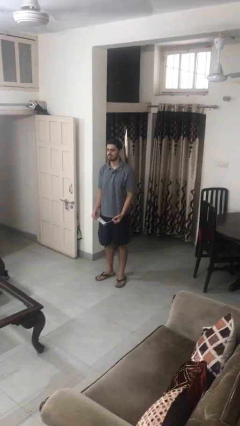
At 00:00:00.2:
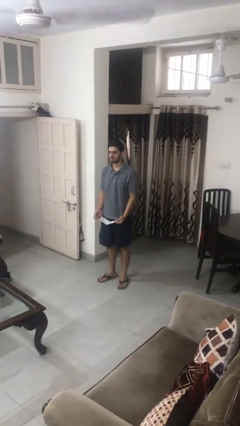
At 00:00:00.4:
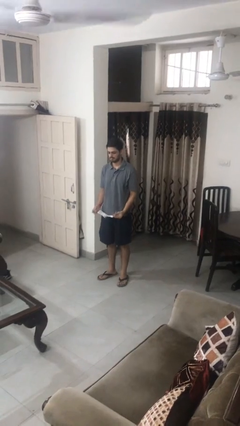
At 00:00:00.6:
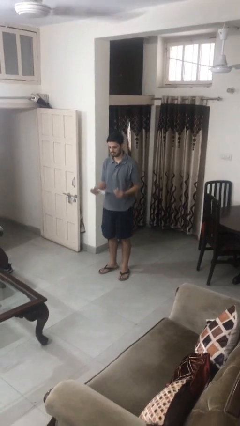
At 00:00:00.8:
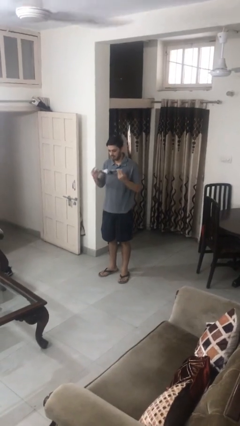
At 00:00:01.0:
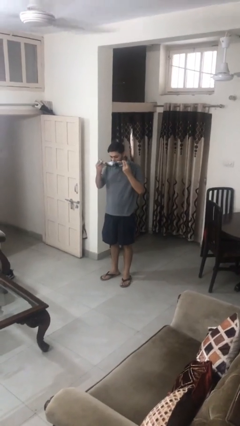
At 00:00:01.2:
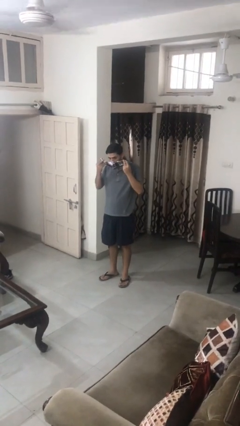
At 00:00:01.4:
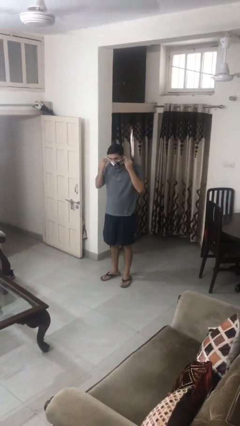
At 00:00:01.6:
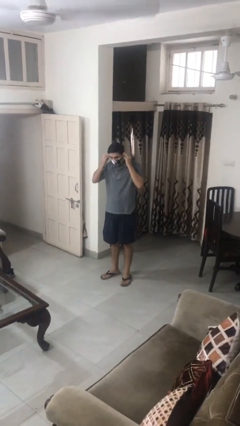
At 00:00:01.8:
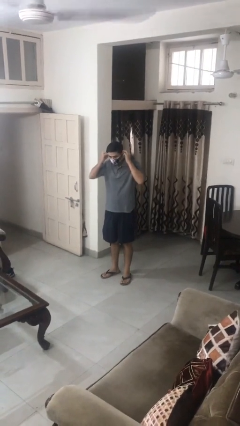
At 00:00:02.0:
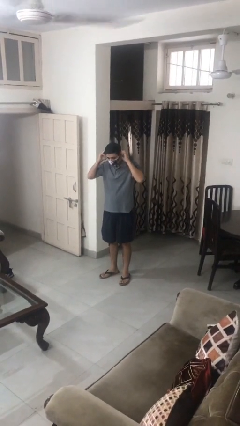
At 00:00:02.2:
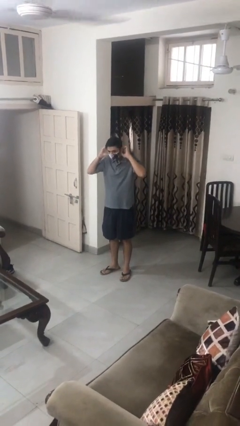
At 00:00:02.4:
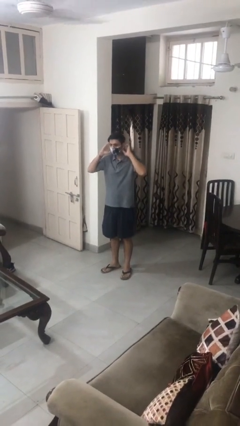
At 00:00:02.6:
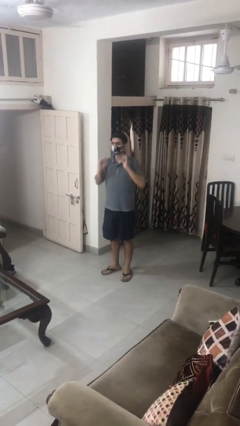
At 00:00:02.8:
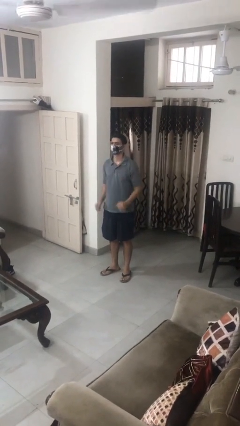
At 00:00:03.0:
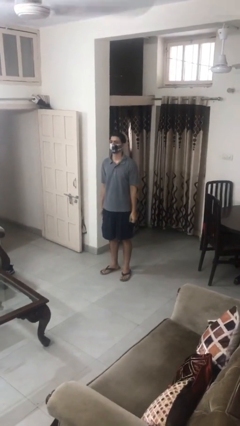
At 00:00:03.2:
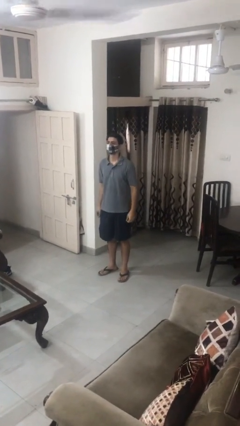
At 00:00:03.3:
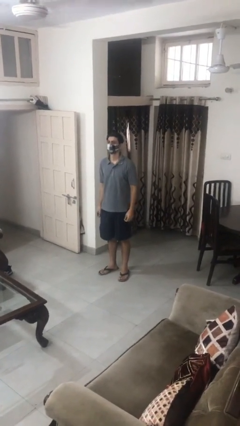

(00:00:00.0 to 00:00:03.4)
person puts on facemask

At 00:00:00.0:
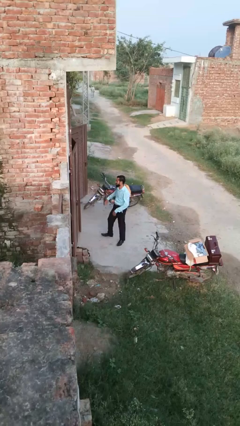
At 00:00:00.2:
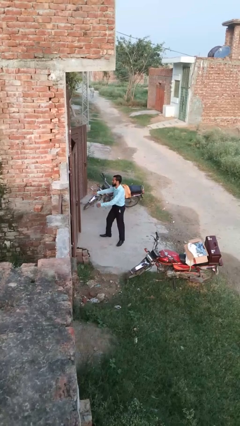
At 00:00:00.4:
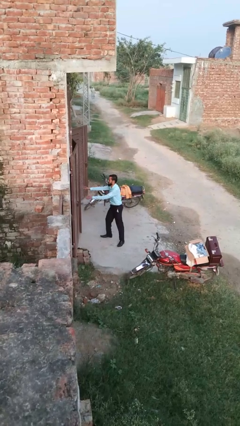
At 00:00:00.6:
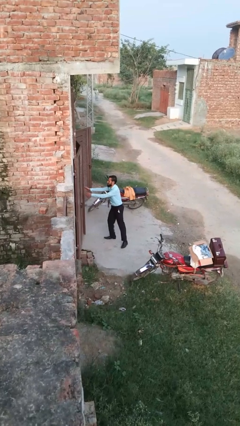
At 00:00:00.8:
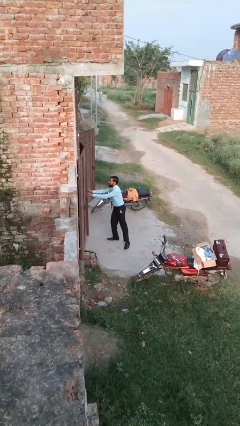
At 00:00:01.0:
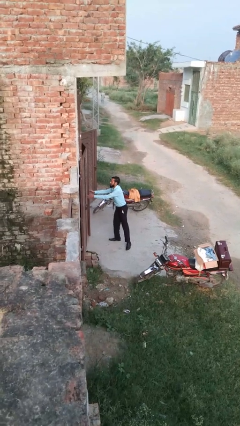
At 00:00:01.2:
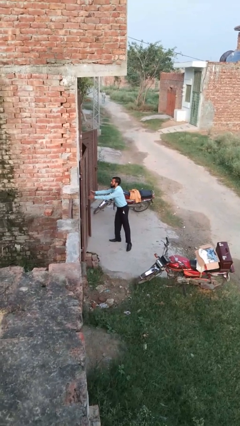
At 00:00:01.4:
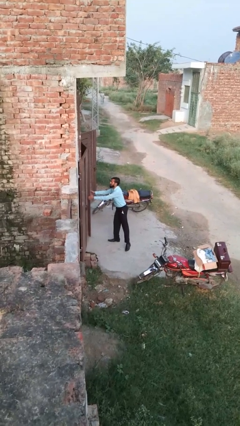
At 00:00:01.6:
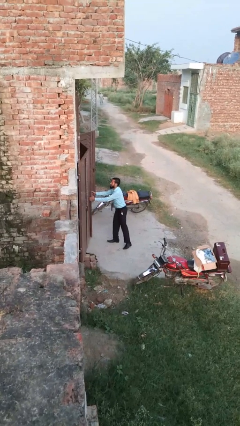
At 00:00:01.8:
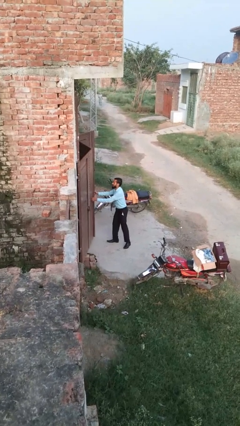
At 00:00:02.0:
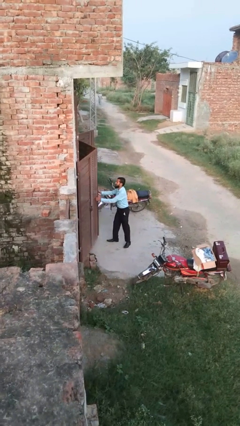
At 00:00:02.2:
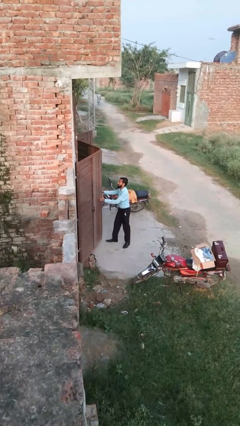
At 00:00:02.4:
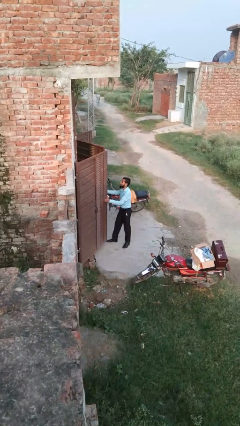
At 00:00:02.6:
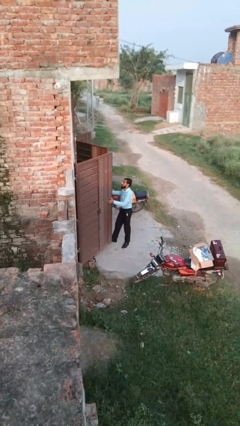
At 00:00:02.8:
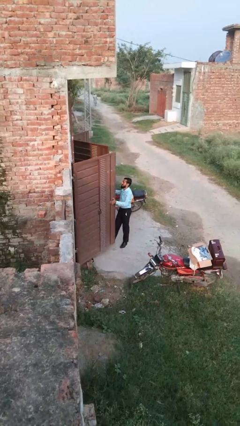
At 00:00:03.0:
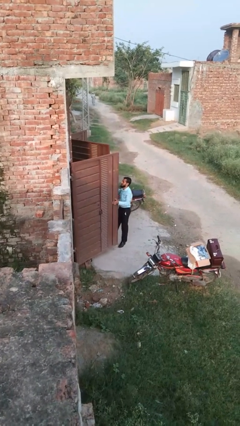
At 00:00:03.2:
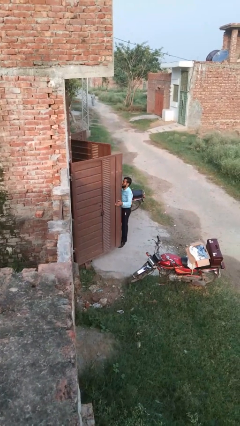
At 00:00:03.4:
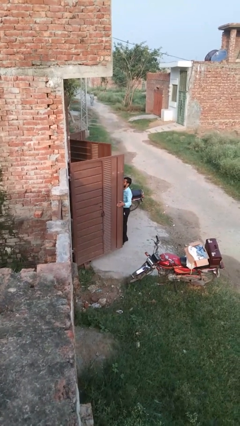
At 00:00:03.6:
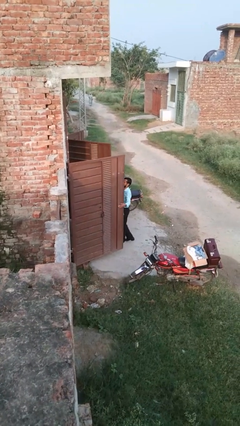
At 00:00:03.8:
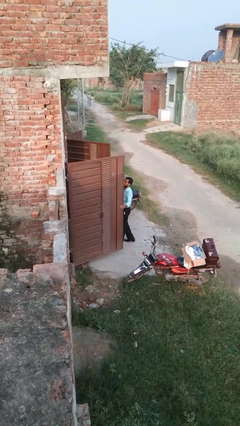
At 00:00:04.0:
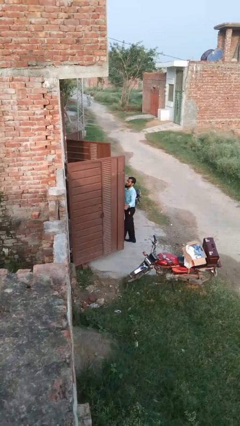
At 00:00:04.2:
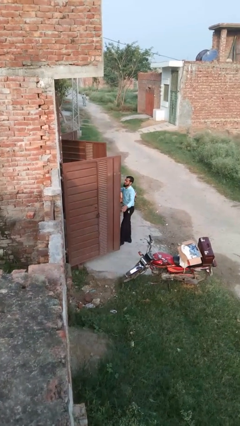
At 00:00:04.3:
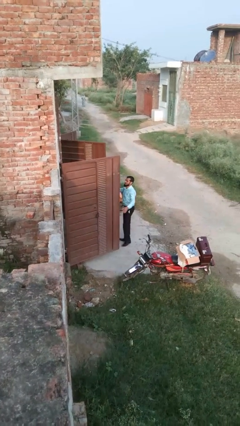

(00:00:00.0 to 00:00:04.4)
person opens gate

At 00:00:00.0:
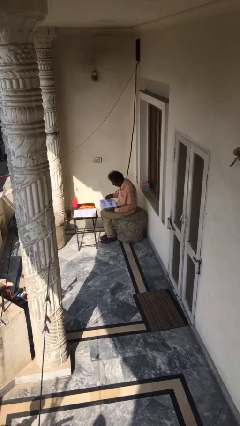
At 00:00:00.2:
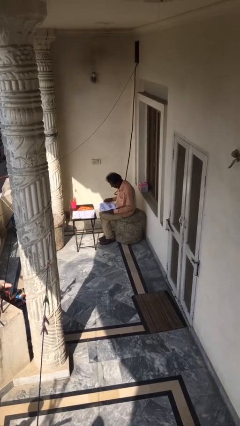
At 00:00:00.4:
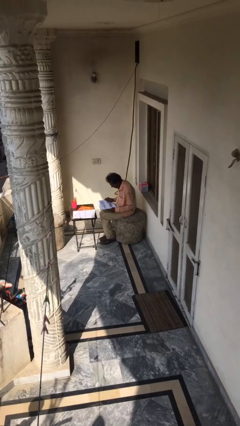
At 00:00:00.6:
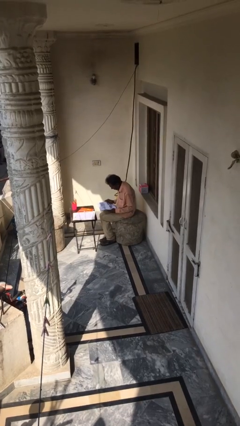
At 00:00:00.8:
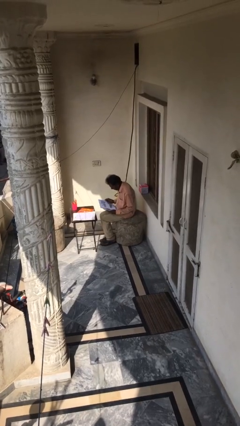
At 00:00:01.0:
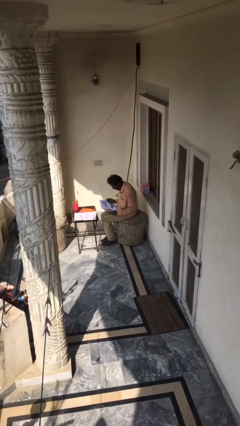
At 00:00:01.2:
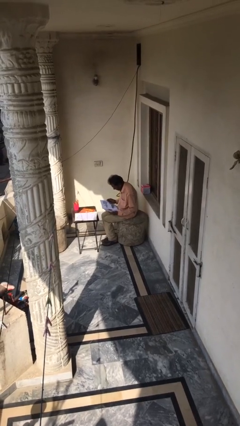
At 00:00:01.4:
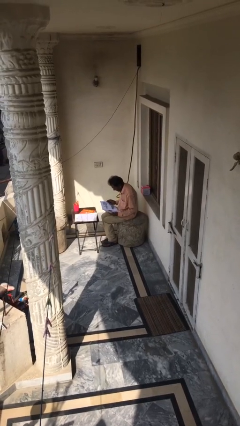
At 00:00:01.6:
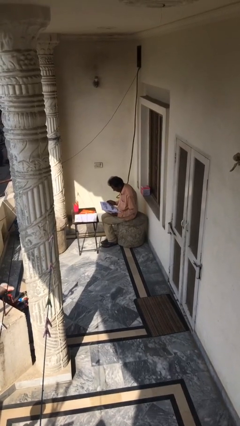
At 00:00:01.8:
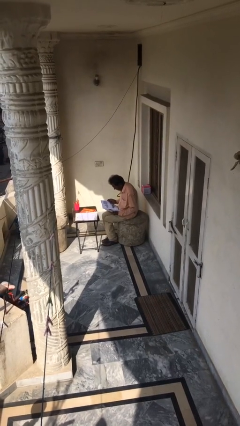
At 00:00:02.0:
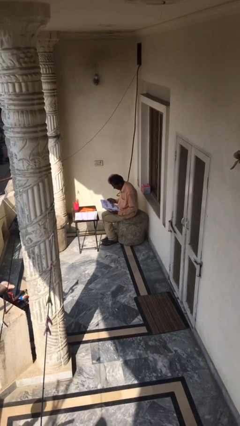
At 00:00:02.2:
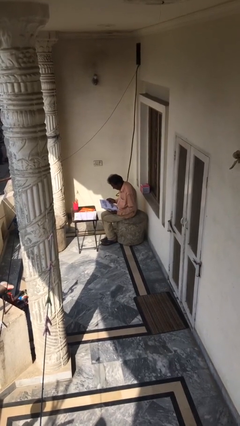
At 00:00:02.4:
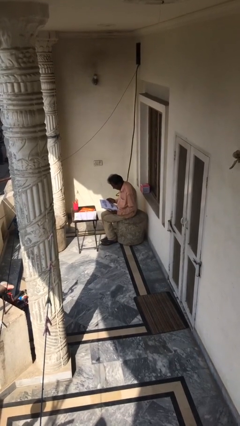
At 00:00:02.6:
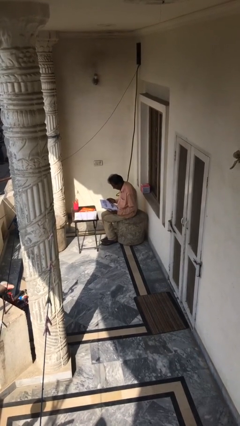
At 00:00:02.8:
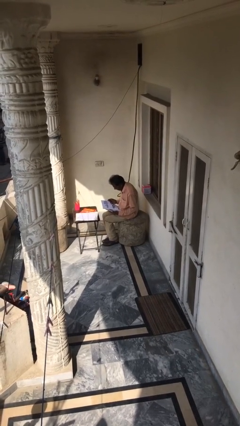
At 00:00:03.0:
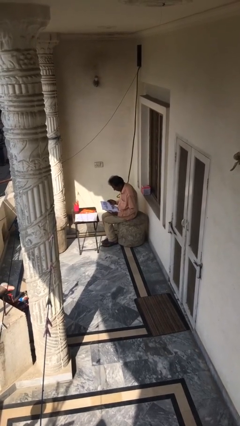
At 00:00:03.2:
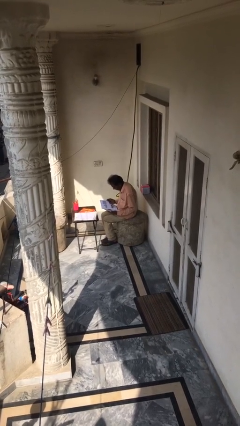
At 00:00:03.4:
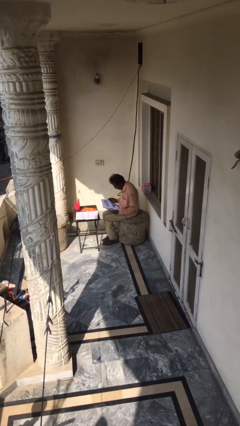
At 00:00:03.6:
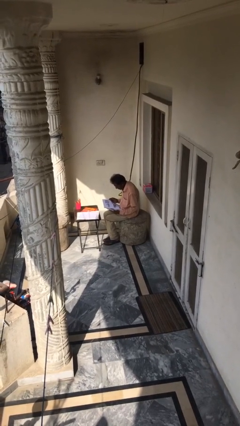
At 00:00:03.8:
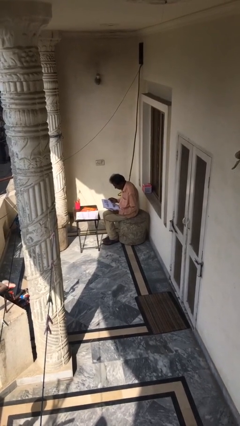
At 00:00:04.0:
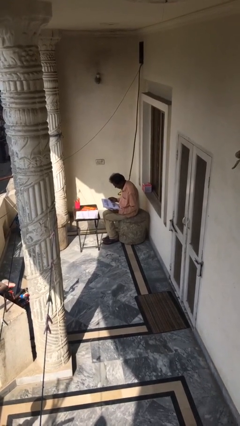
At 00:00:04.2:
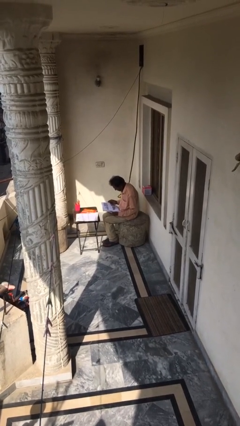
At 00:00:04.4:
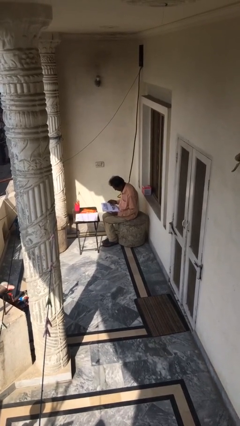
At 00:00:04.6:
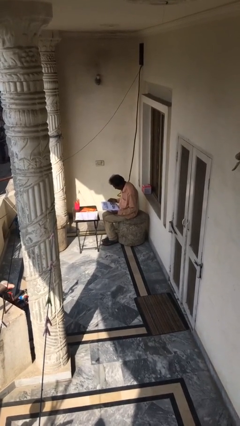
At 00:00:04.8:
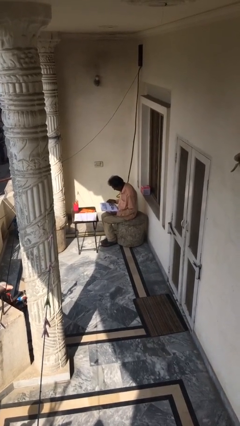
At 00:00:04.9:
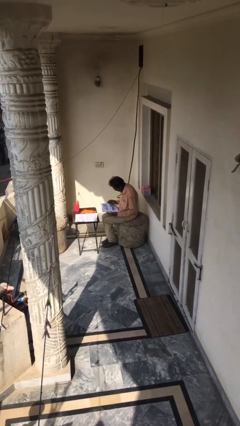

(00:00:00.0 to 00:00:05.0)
person reads document

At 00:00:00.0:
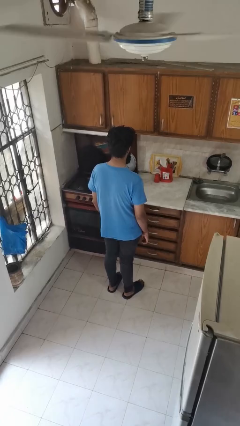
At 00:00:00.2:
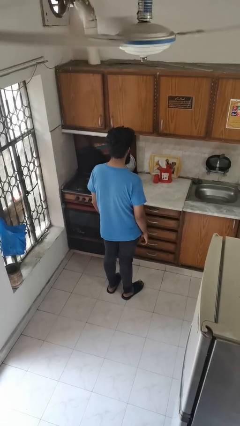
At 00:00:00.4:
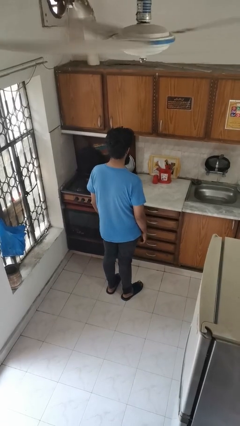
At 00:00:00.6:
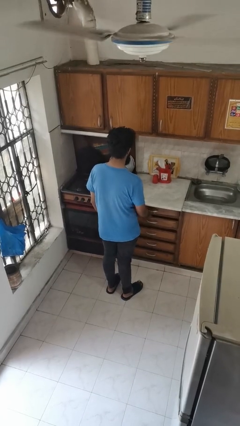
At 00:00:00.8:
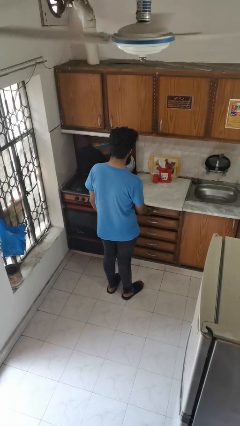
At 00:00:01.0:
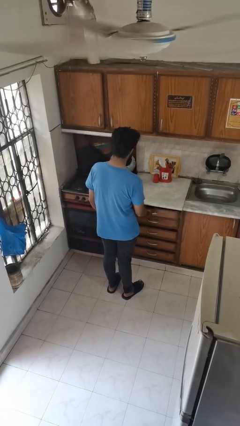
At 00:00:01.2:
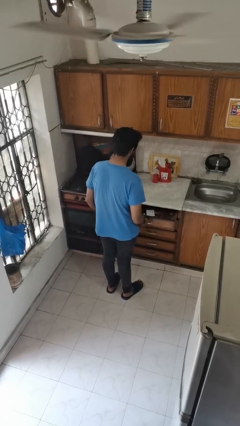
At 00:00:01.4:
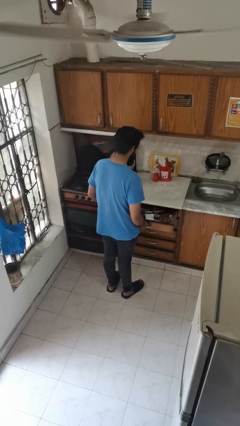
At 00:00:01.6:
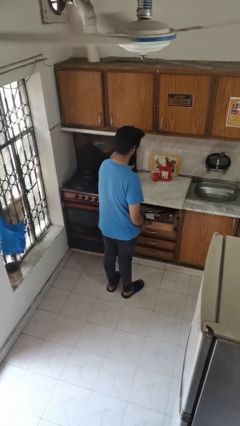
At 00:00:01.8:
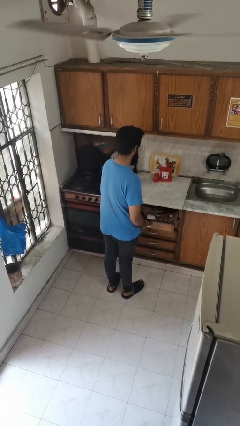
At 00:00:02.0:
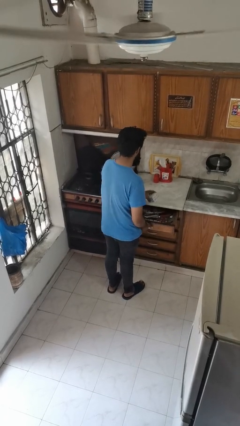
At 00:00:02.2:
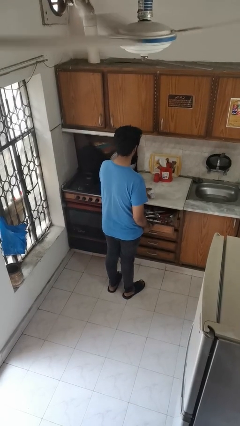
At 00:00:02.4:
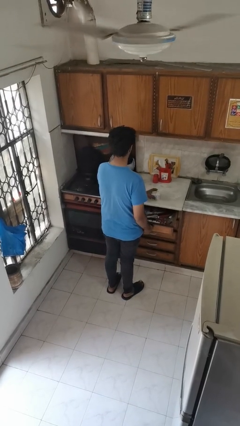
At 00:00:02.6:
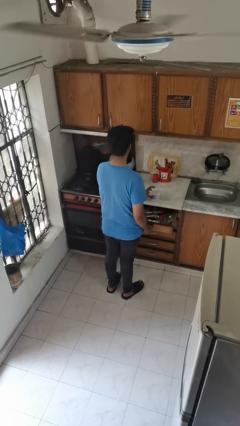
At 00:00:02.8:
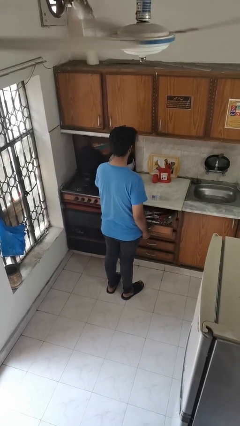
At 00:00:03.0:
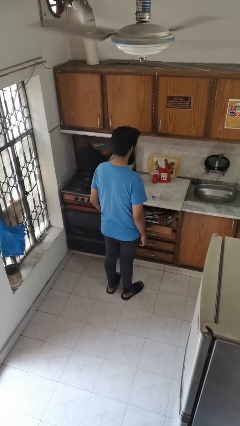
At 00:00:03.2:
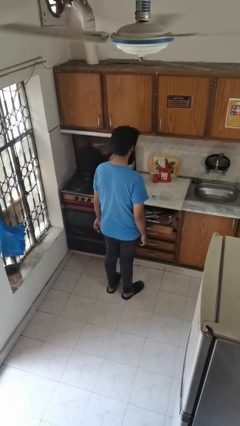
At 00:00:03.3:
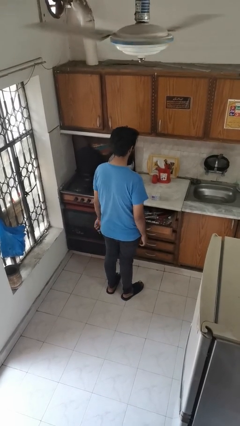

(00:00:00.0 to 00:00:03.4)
person takes object from kitchen drawer

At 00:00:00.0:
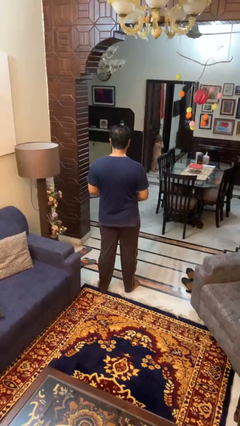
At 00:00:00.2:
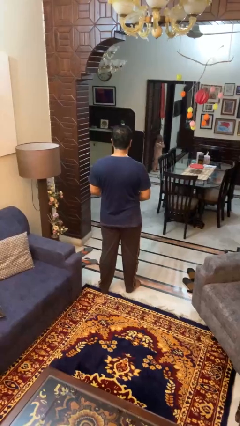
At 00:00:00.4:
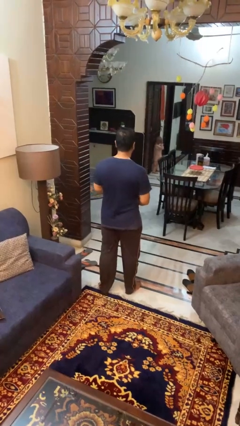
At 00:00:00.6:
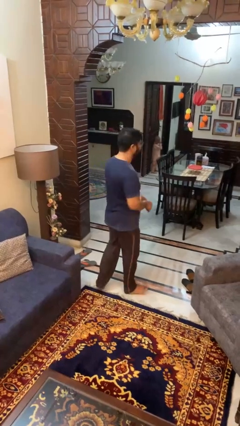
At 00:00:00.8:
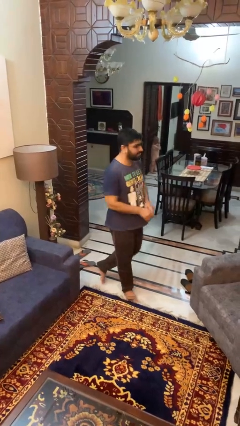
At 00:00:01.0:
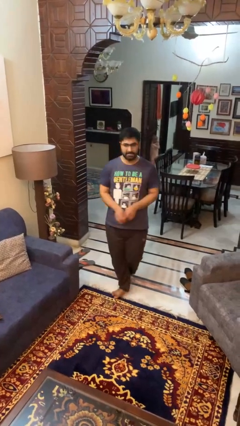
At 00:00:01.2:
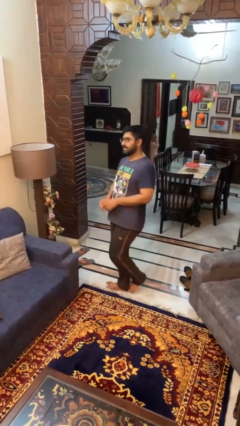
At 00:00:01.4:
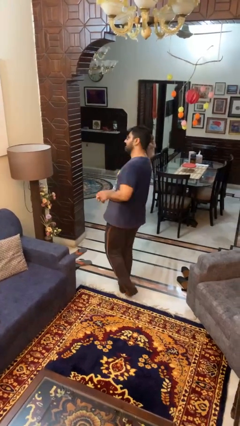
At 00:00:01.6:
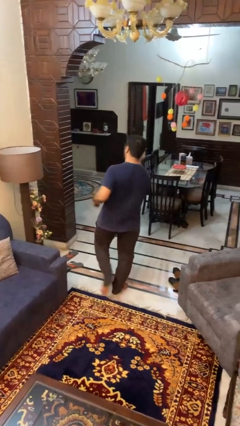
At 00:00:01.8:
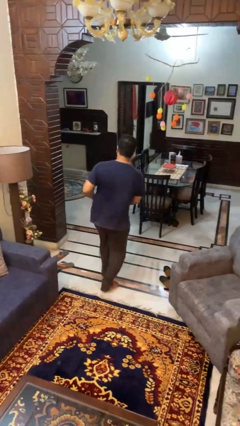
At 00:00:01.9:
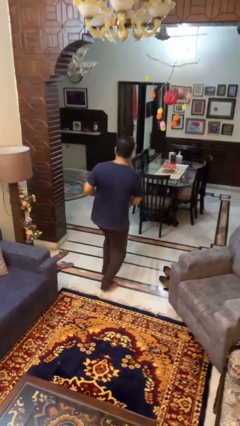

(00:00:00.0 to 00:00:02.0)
person twirls
